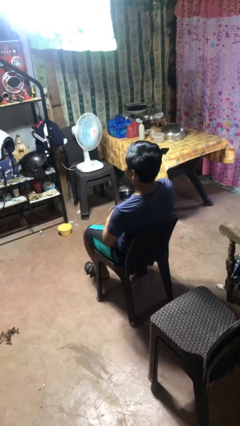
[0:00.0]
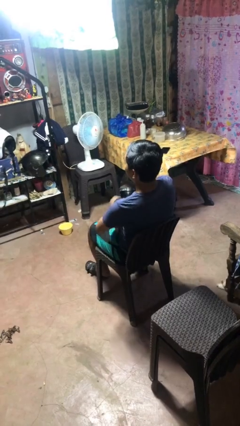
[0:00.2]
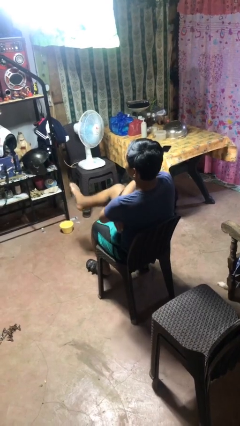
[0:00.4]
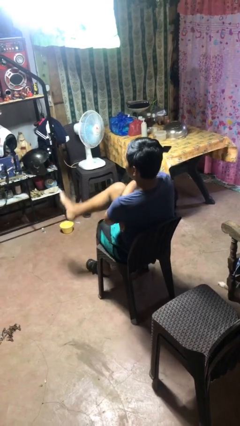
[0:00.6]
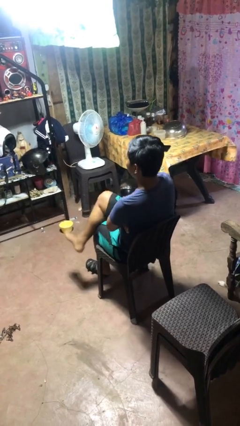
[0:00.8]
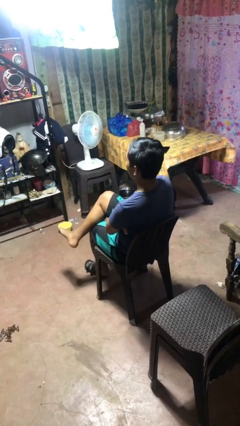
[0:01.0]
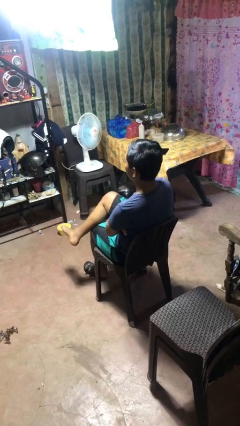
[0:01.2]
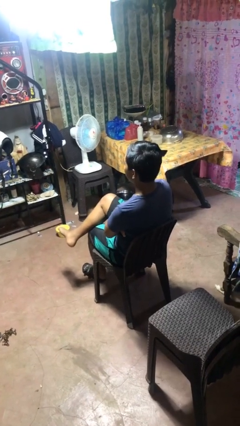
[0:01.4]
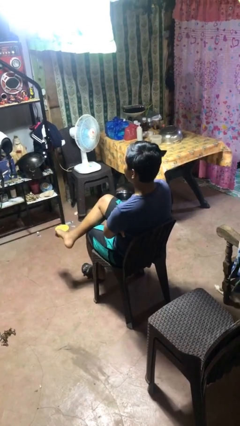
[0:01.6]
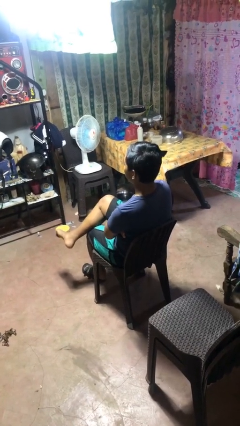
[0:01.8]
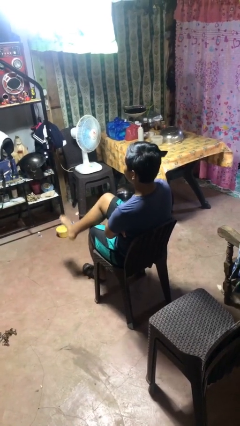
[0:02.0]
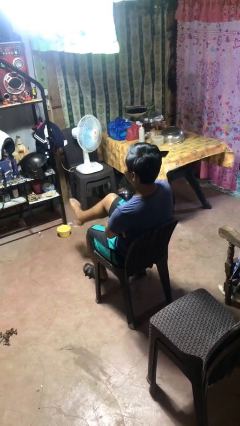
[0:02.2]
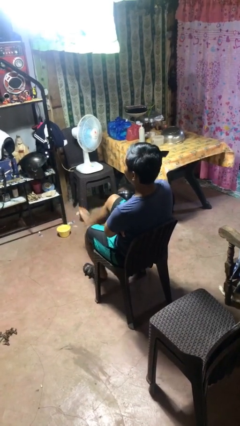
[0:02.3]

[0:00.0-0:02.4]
person crosses legs

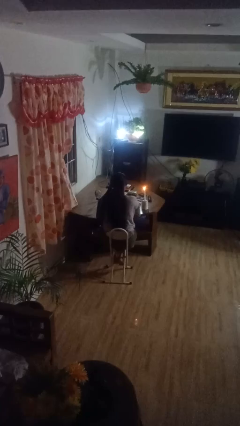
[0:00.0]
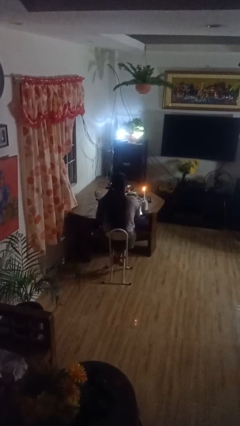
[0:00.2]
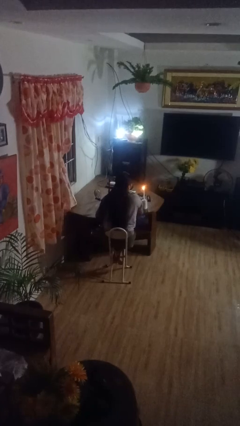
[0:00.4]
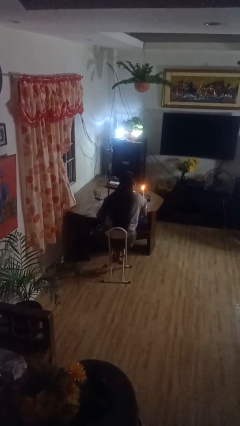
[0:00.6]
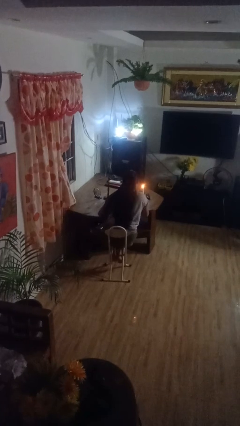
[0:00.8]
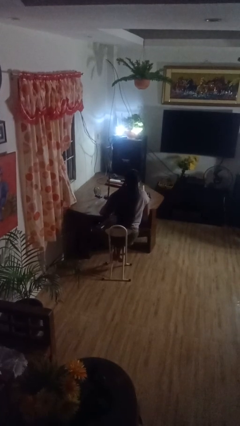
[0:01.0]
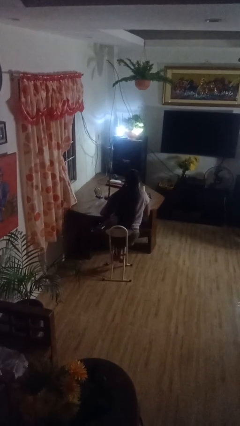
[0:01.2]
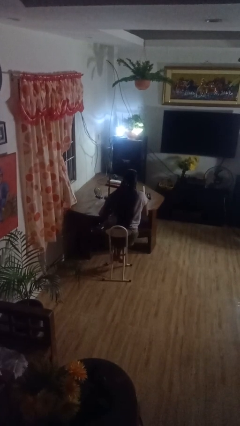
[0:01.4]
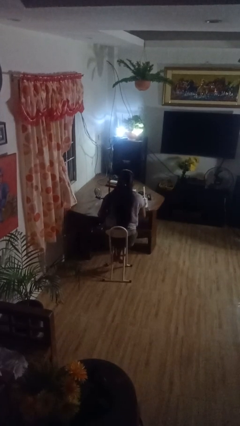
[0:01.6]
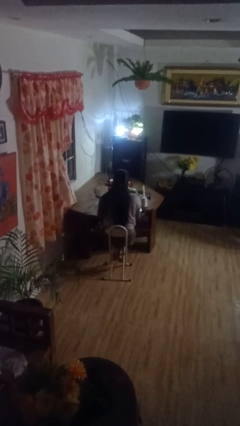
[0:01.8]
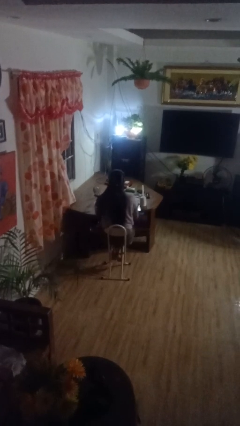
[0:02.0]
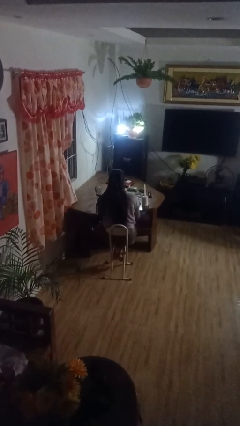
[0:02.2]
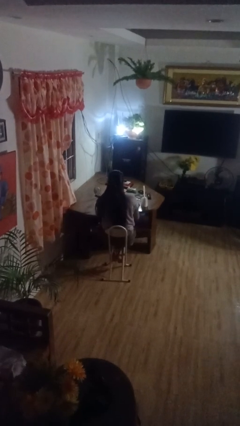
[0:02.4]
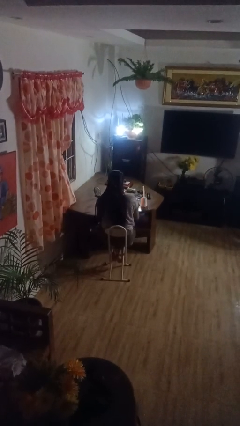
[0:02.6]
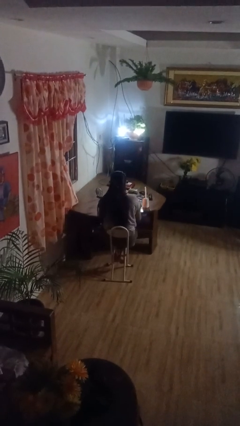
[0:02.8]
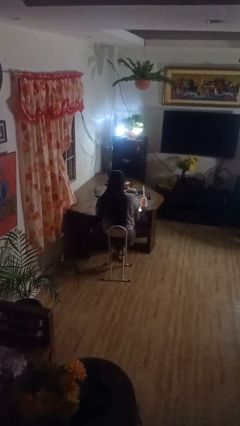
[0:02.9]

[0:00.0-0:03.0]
person extinguishes candle

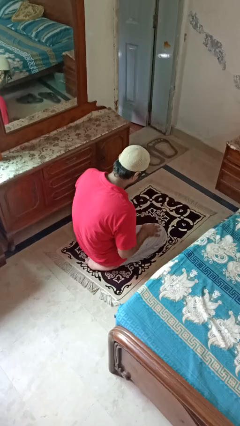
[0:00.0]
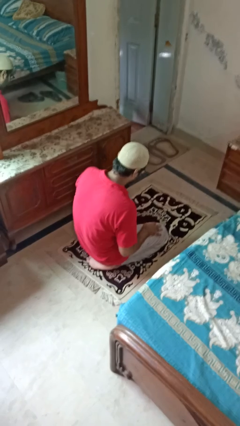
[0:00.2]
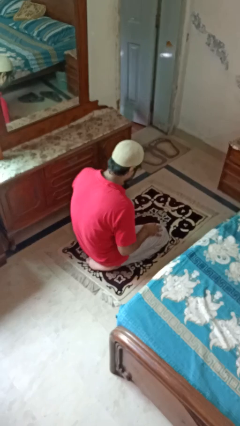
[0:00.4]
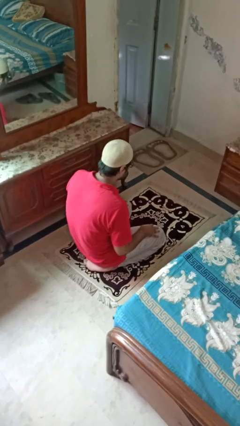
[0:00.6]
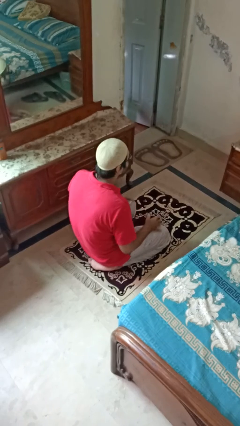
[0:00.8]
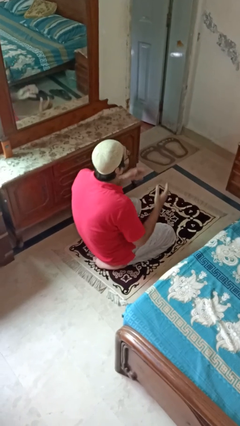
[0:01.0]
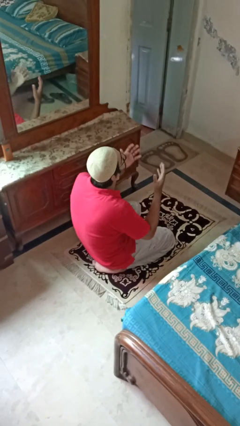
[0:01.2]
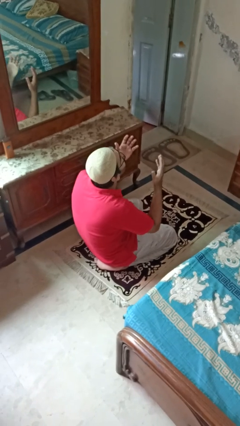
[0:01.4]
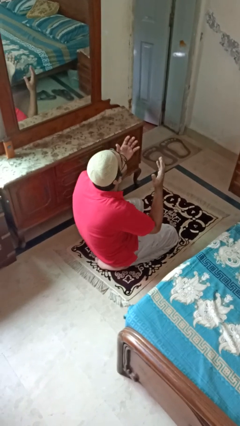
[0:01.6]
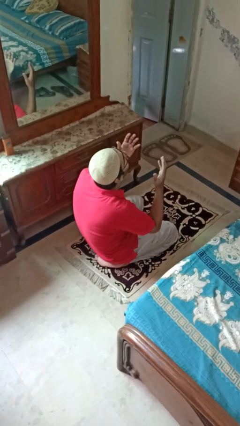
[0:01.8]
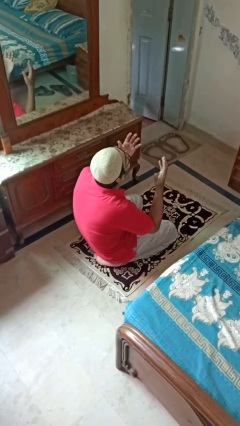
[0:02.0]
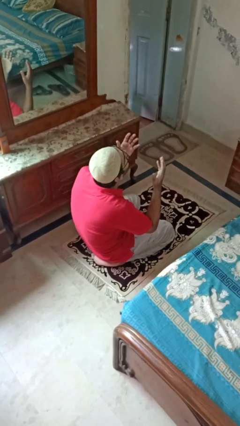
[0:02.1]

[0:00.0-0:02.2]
person prays

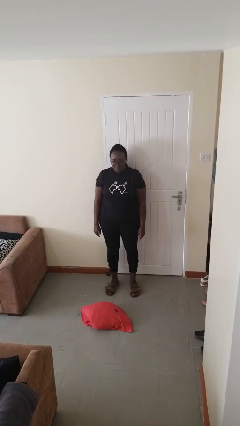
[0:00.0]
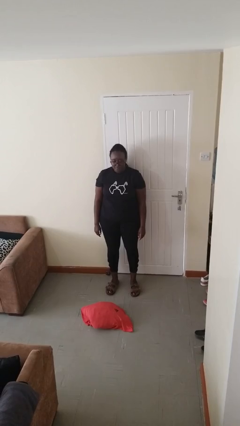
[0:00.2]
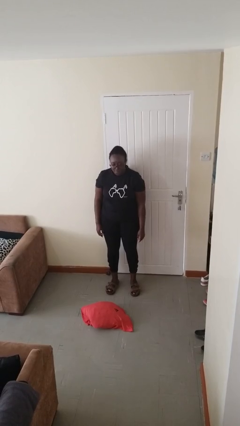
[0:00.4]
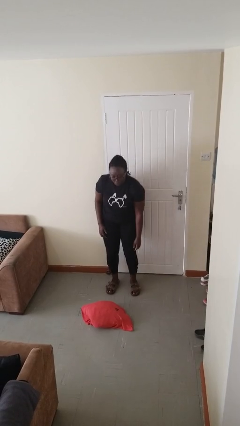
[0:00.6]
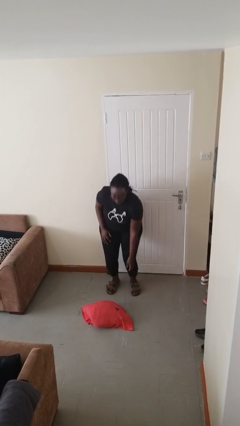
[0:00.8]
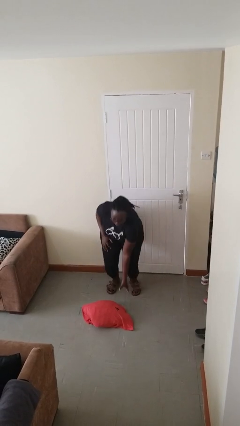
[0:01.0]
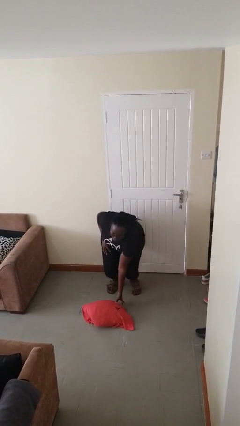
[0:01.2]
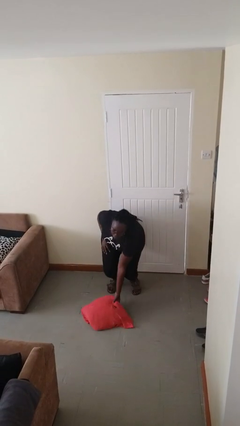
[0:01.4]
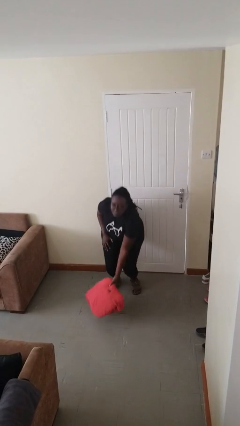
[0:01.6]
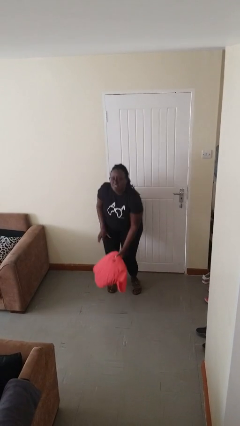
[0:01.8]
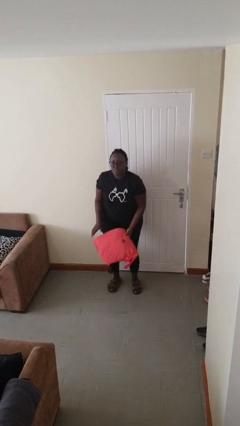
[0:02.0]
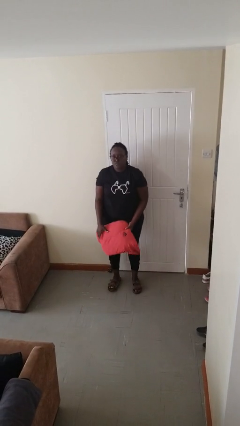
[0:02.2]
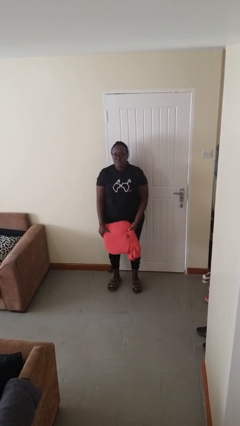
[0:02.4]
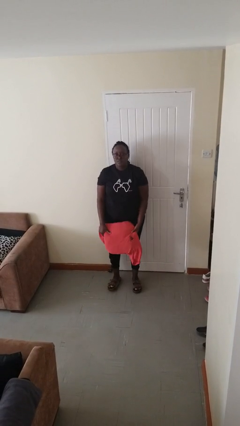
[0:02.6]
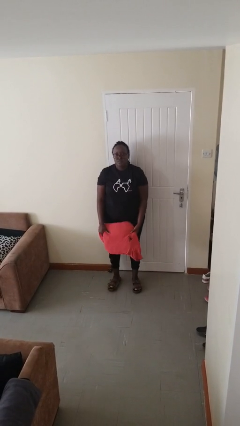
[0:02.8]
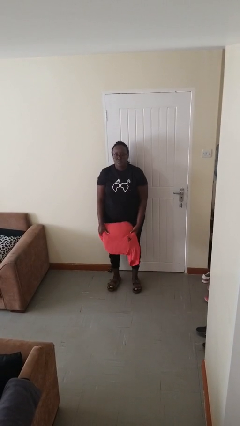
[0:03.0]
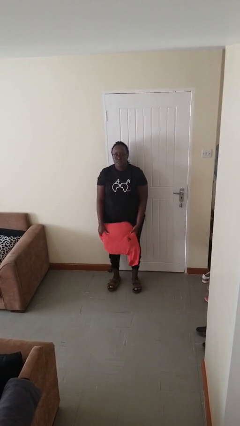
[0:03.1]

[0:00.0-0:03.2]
person picks up object from floor

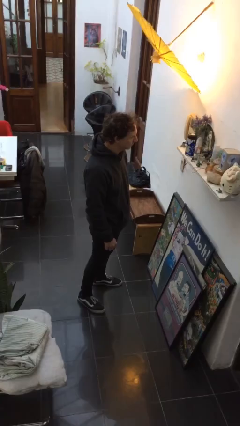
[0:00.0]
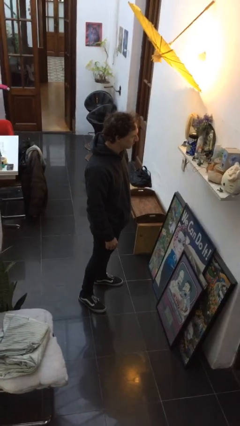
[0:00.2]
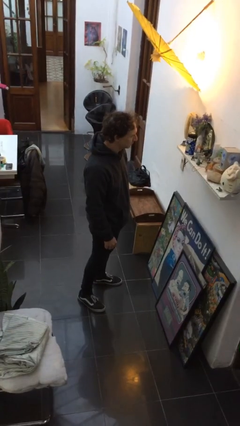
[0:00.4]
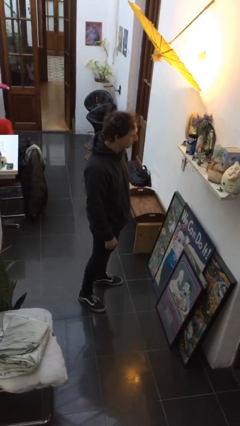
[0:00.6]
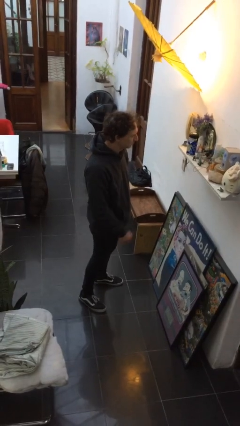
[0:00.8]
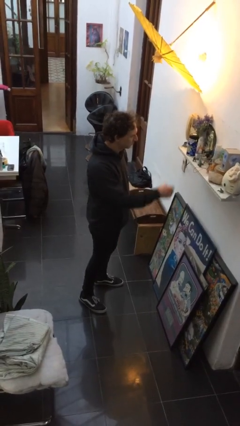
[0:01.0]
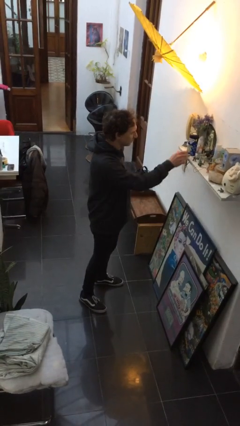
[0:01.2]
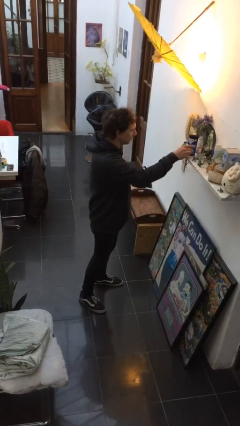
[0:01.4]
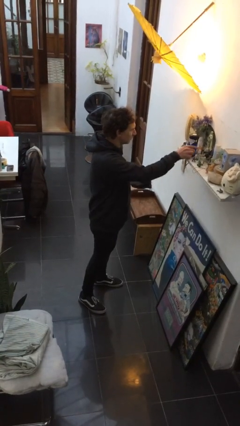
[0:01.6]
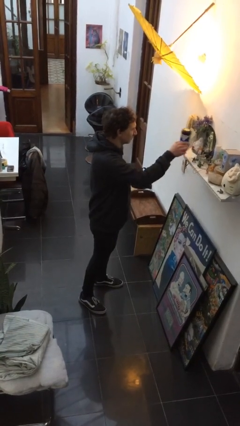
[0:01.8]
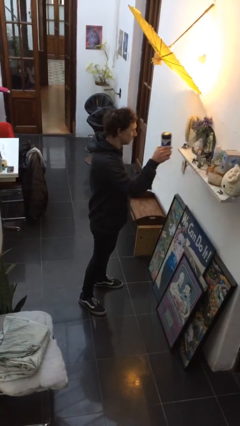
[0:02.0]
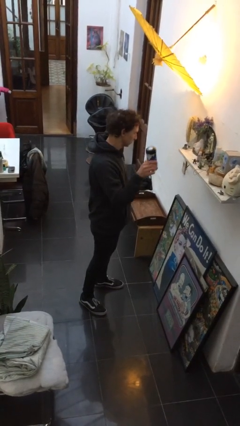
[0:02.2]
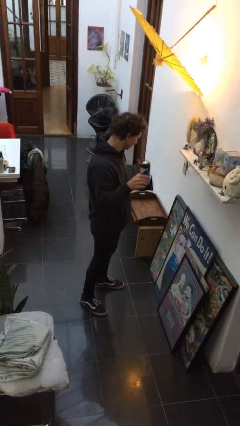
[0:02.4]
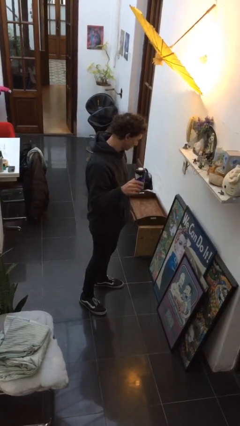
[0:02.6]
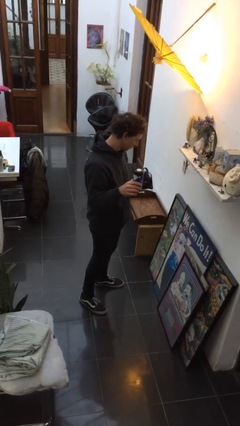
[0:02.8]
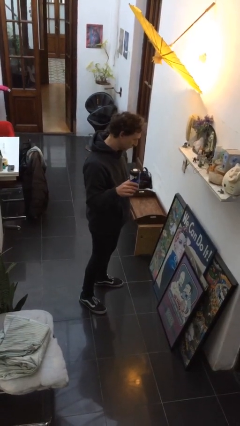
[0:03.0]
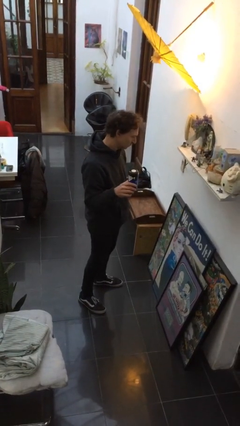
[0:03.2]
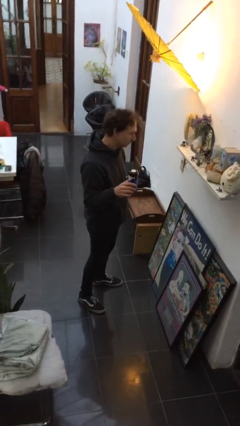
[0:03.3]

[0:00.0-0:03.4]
person picks up object from shelf

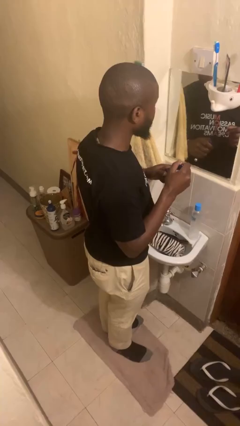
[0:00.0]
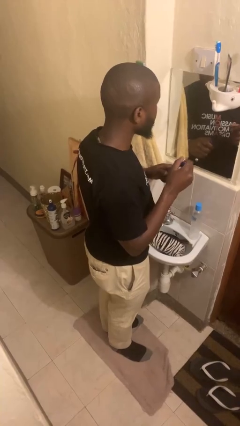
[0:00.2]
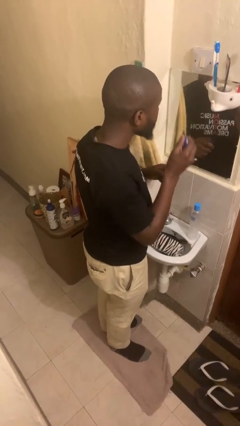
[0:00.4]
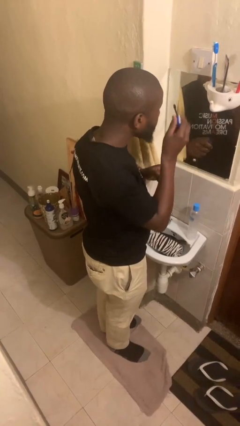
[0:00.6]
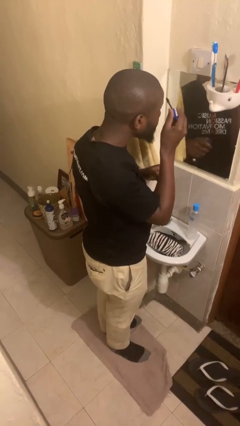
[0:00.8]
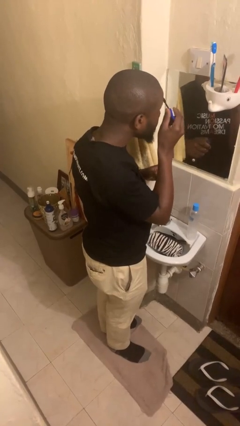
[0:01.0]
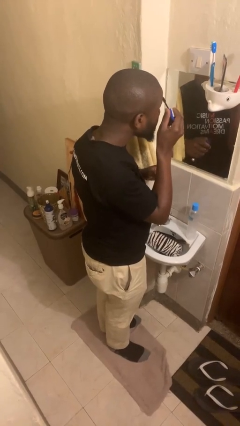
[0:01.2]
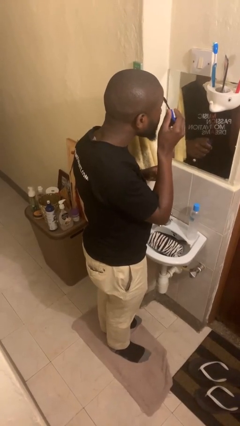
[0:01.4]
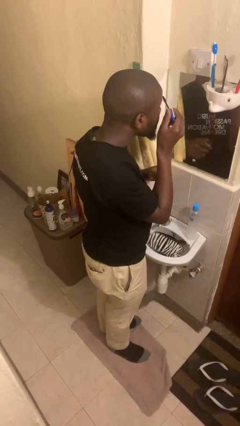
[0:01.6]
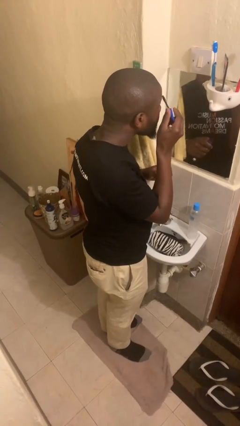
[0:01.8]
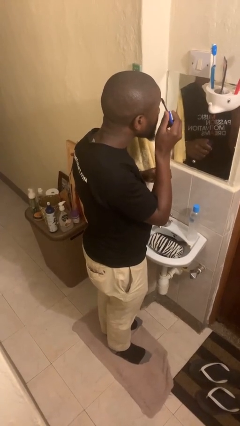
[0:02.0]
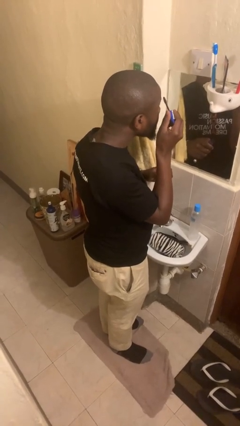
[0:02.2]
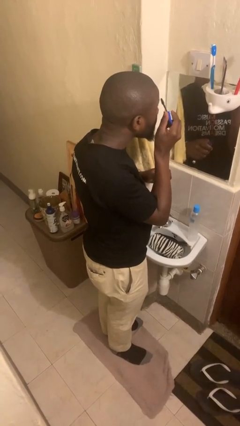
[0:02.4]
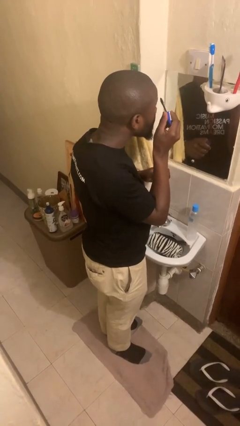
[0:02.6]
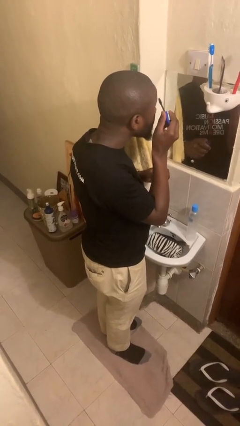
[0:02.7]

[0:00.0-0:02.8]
person applies eye makeup
